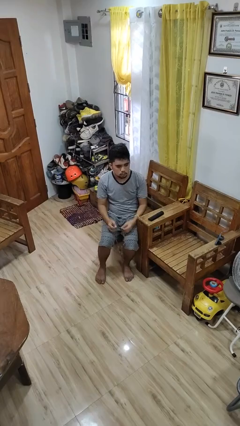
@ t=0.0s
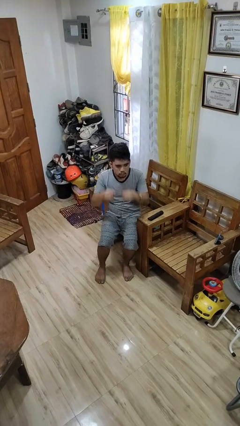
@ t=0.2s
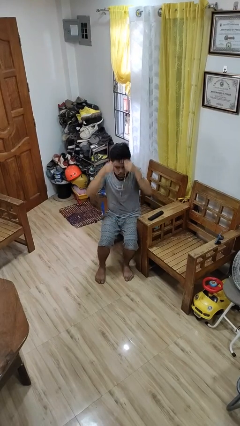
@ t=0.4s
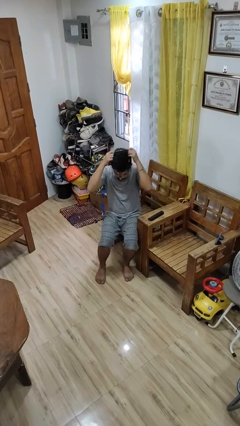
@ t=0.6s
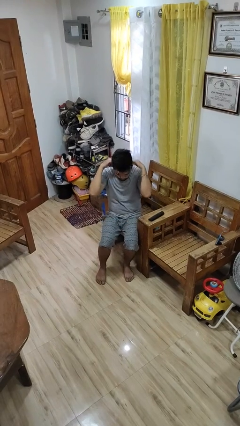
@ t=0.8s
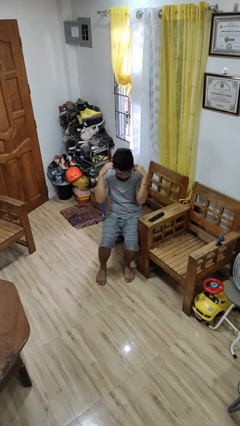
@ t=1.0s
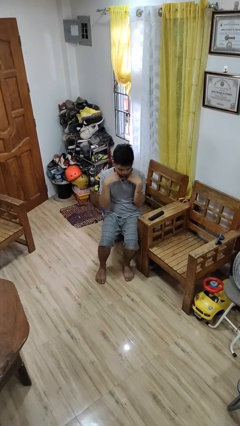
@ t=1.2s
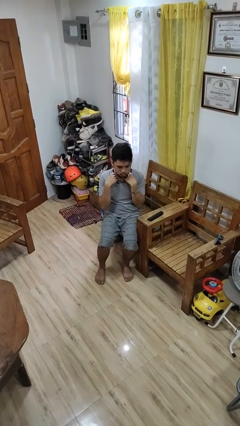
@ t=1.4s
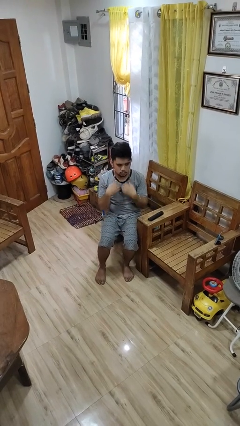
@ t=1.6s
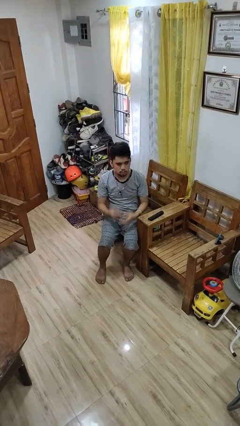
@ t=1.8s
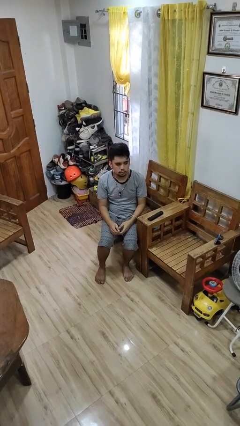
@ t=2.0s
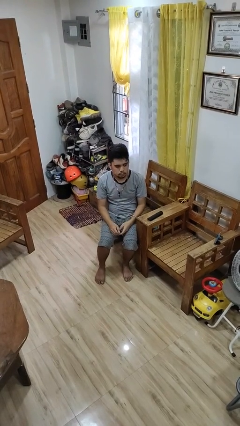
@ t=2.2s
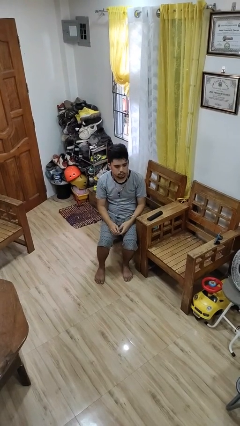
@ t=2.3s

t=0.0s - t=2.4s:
person puts on necklace

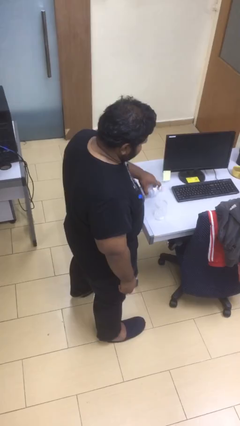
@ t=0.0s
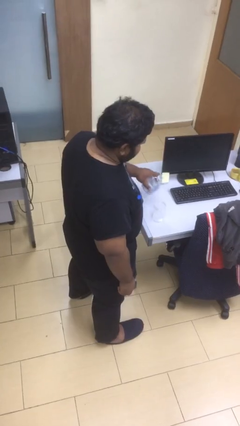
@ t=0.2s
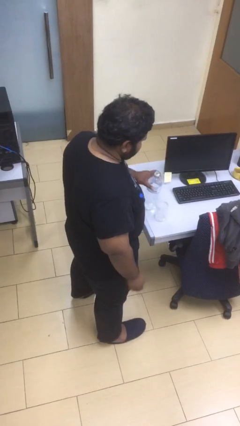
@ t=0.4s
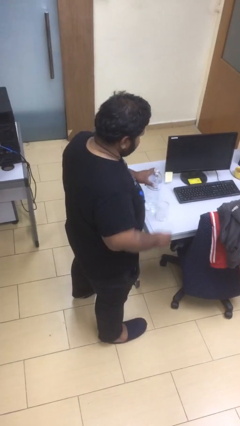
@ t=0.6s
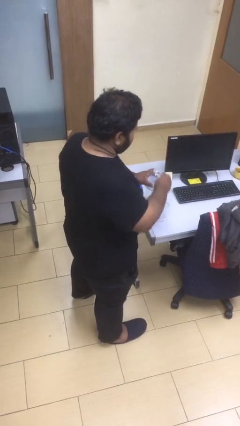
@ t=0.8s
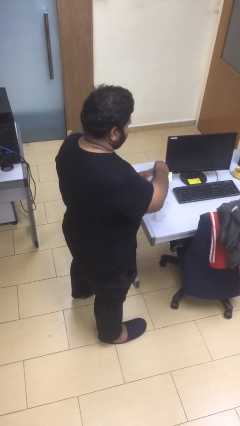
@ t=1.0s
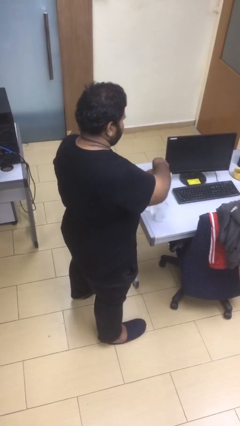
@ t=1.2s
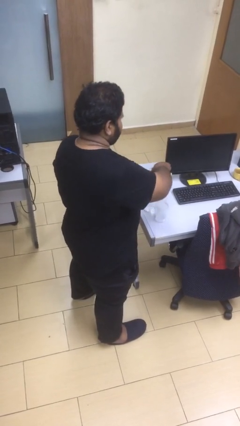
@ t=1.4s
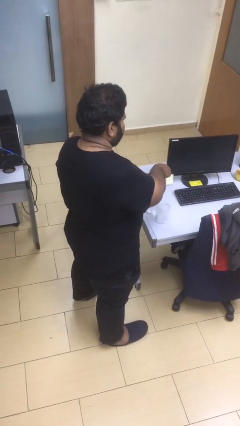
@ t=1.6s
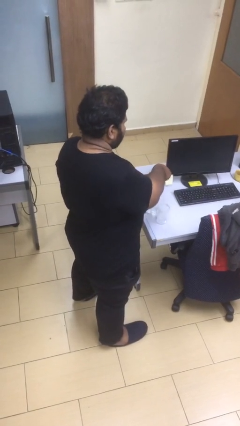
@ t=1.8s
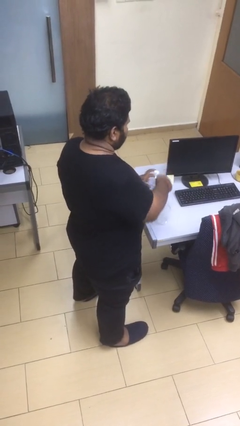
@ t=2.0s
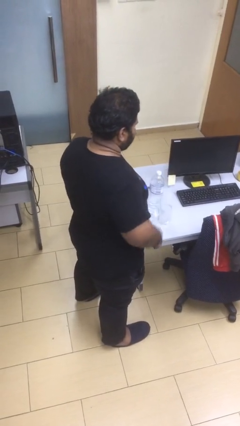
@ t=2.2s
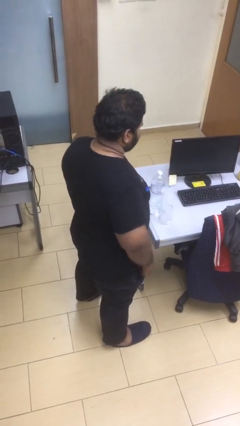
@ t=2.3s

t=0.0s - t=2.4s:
person screws lid to bottle

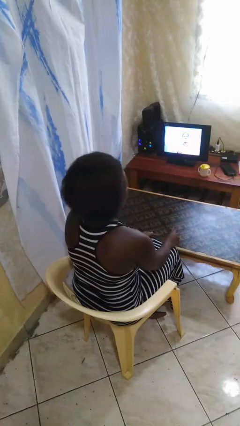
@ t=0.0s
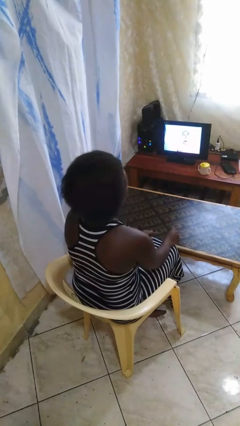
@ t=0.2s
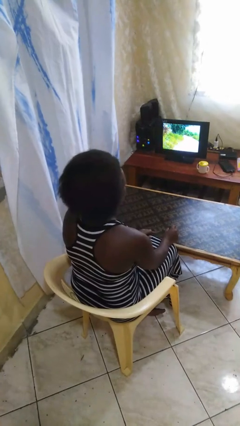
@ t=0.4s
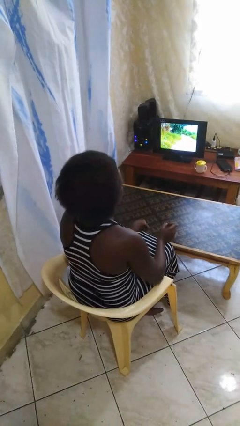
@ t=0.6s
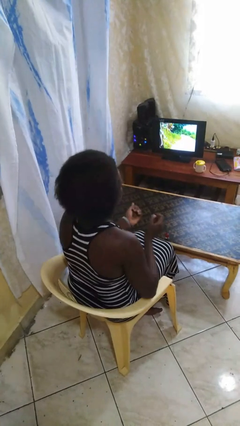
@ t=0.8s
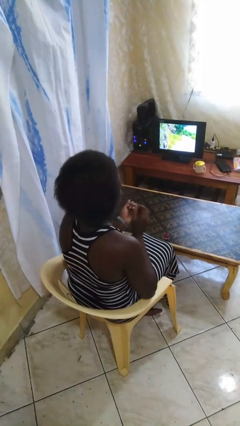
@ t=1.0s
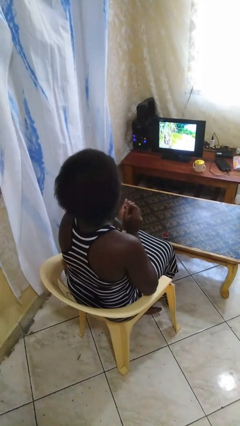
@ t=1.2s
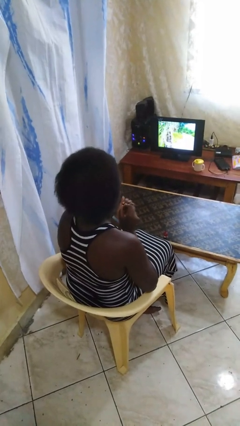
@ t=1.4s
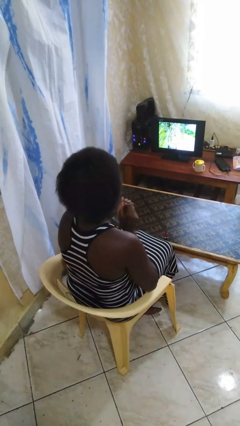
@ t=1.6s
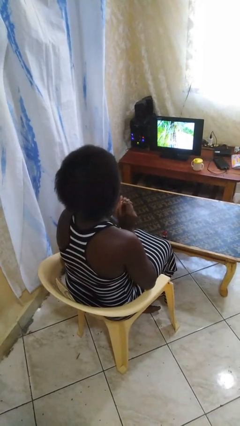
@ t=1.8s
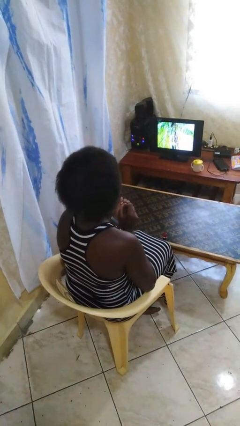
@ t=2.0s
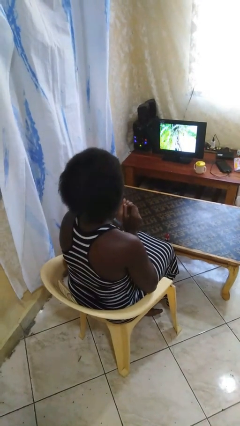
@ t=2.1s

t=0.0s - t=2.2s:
person paints fingernails

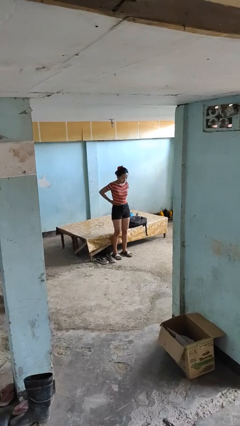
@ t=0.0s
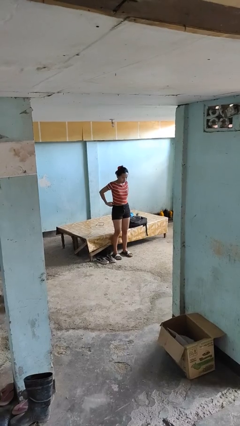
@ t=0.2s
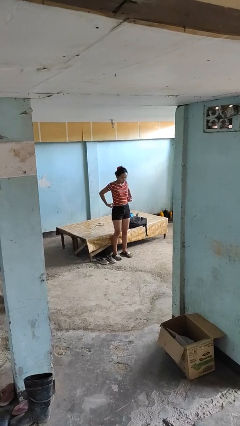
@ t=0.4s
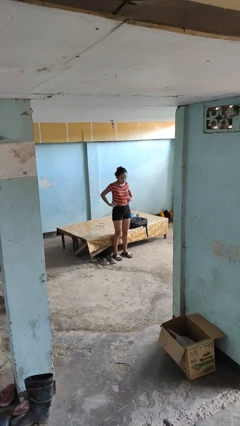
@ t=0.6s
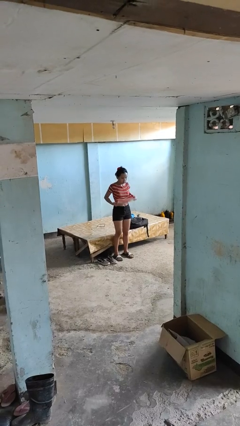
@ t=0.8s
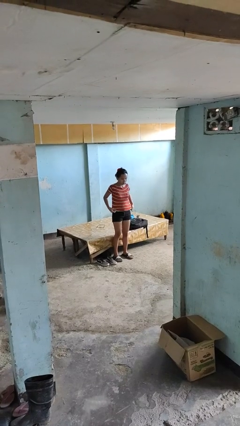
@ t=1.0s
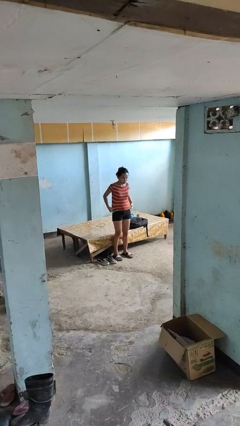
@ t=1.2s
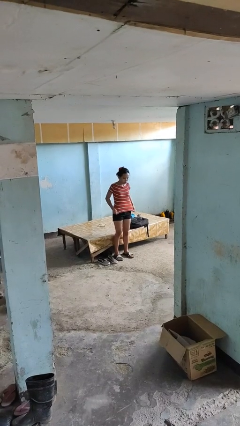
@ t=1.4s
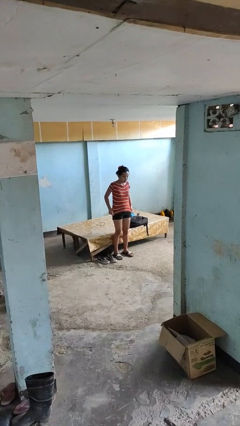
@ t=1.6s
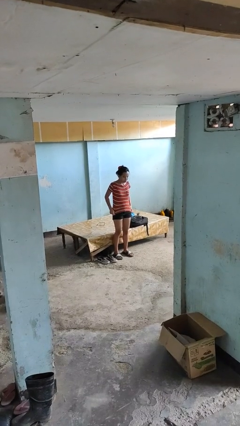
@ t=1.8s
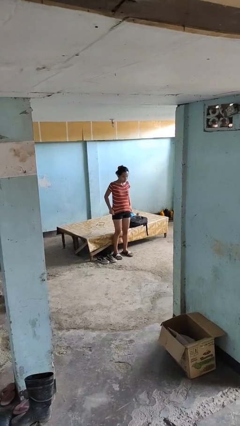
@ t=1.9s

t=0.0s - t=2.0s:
person untucks shirt

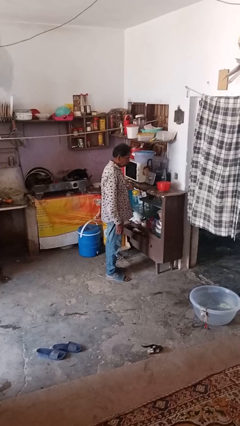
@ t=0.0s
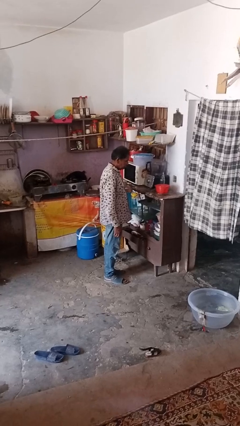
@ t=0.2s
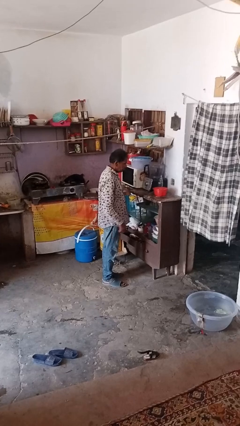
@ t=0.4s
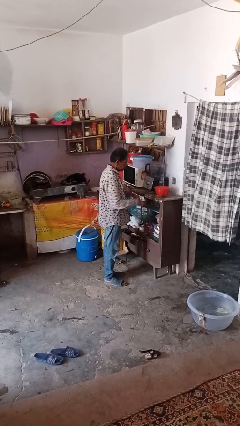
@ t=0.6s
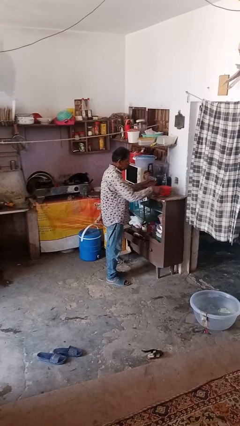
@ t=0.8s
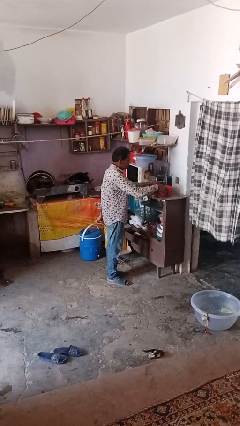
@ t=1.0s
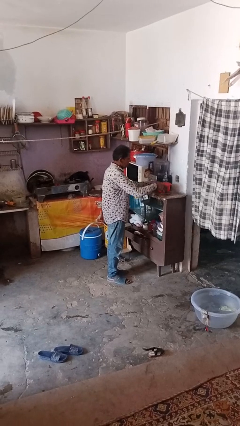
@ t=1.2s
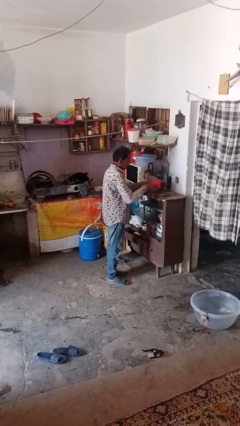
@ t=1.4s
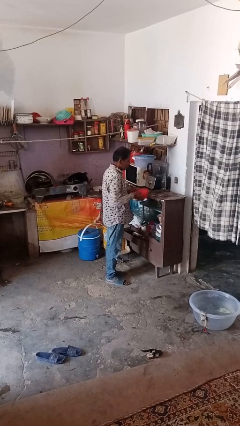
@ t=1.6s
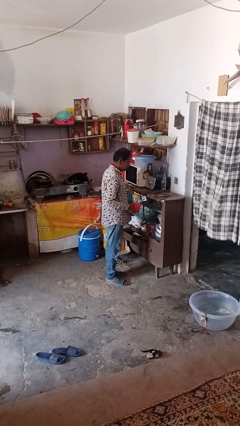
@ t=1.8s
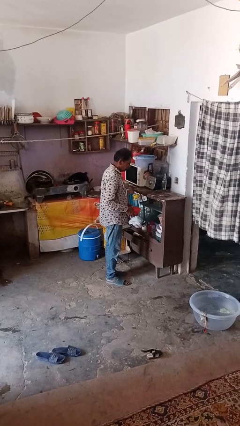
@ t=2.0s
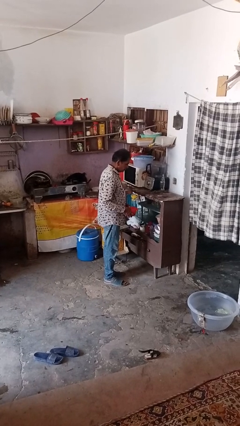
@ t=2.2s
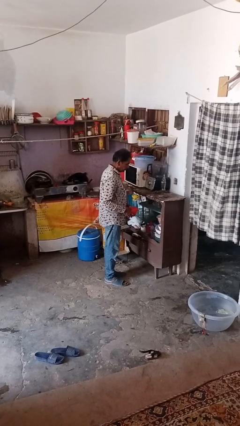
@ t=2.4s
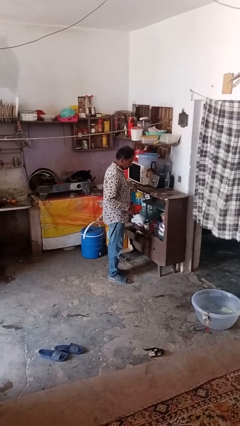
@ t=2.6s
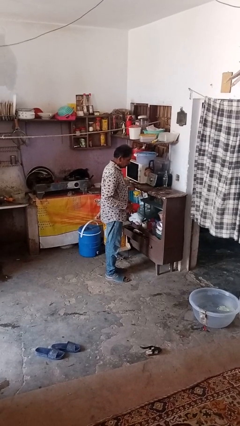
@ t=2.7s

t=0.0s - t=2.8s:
person picks up object from countertop

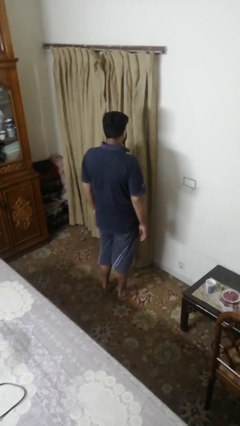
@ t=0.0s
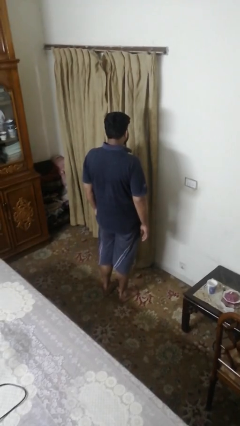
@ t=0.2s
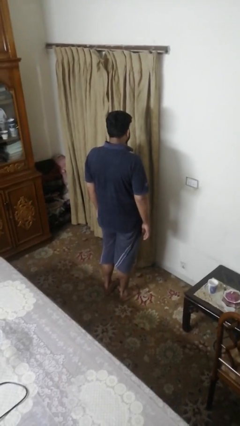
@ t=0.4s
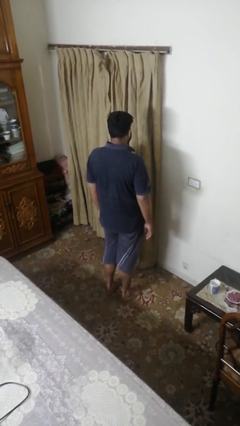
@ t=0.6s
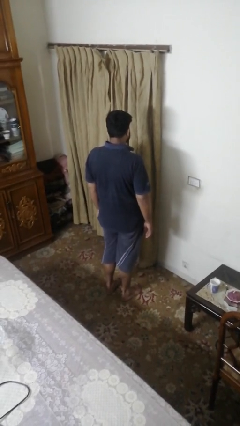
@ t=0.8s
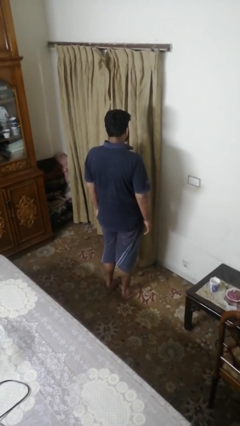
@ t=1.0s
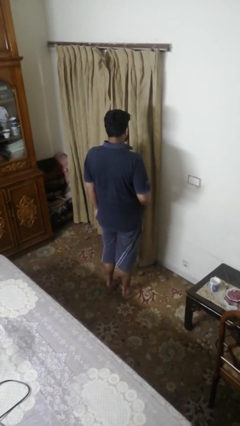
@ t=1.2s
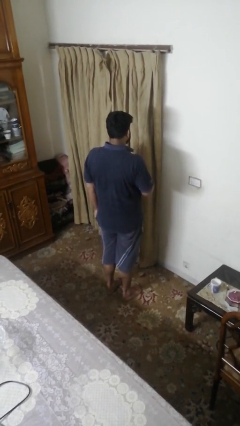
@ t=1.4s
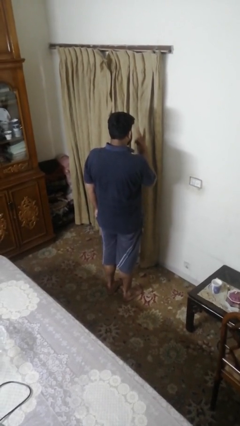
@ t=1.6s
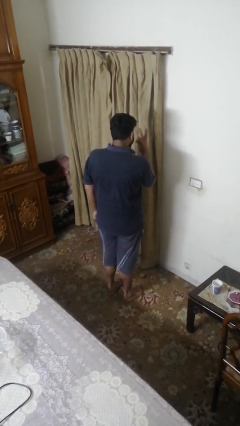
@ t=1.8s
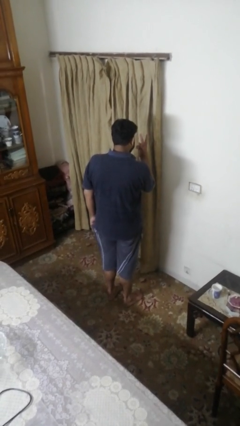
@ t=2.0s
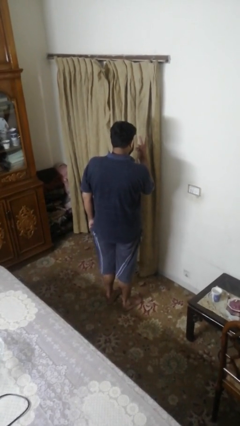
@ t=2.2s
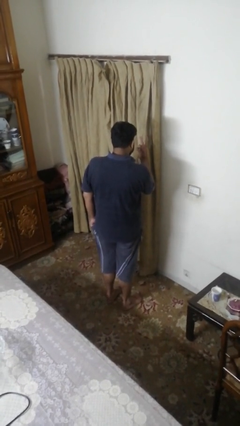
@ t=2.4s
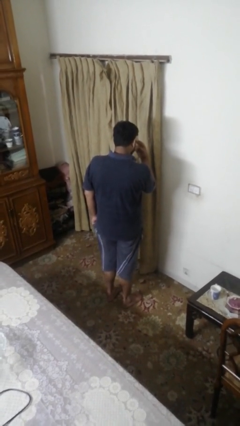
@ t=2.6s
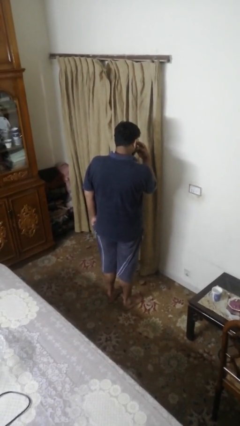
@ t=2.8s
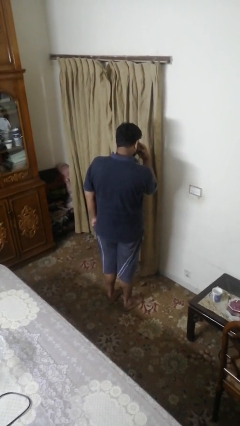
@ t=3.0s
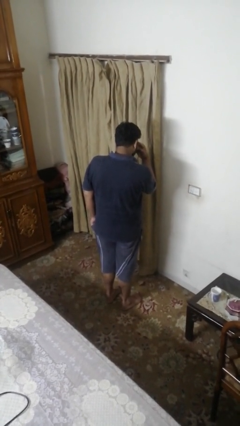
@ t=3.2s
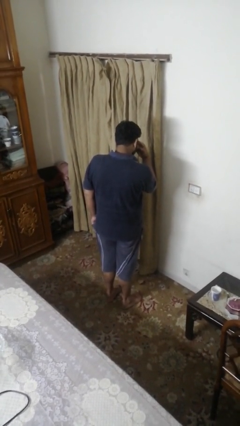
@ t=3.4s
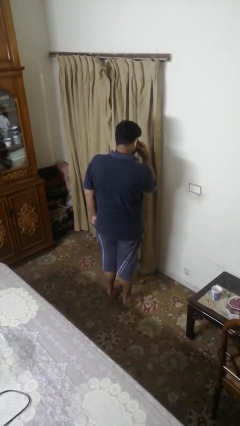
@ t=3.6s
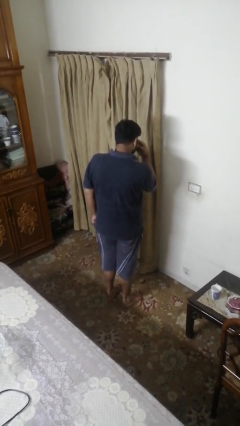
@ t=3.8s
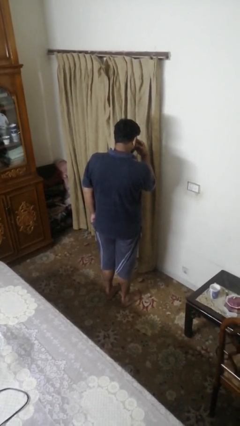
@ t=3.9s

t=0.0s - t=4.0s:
person gestures watch closely

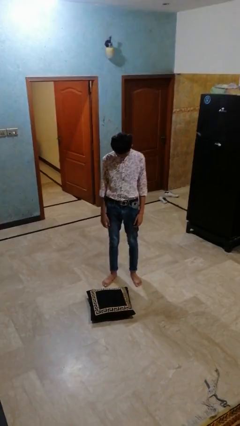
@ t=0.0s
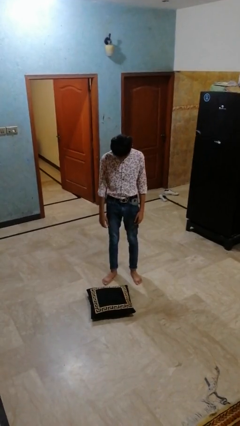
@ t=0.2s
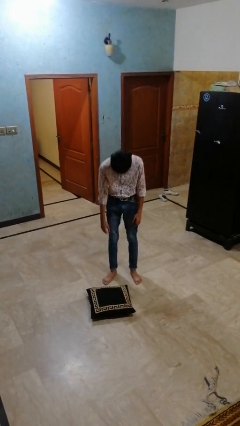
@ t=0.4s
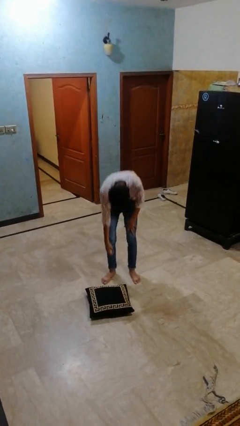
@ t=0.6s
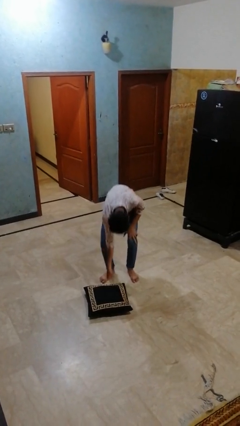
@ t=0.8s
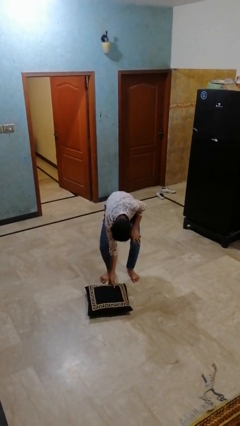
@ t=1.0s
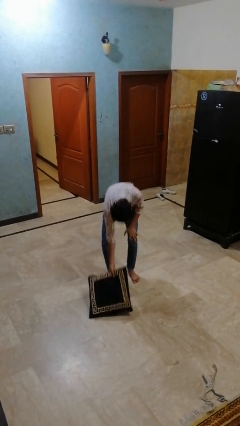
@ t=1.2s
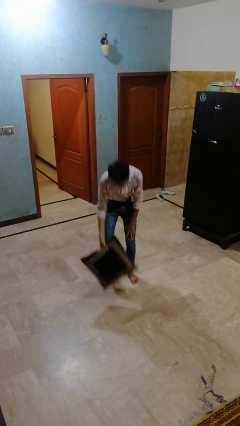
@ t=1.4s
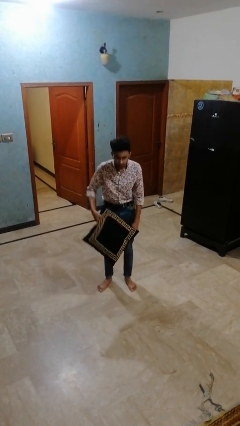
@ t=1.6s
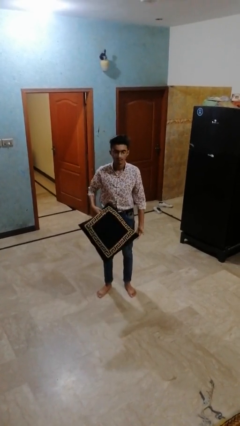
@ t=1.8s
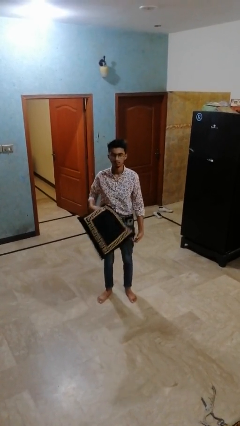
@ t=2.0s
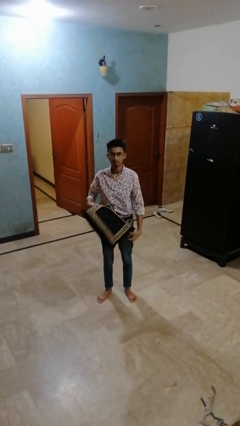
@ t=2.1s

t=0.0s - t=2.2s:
person picks up object from floor
